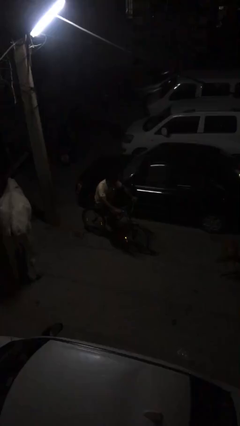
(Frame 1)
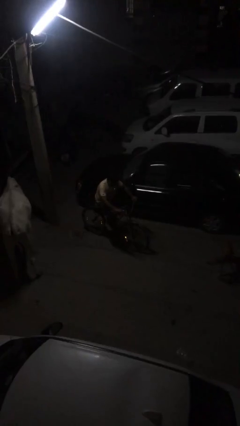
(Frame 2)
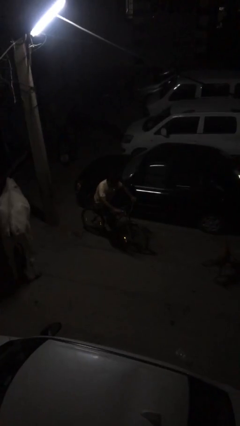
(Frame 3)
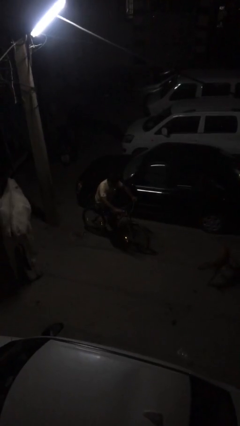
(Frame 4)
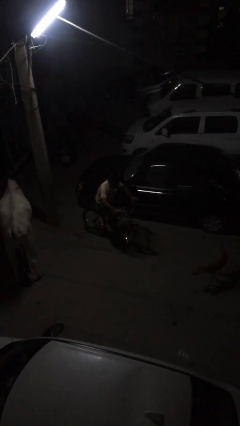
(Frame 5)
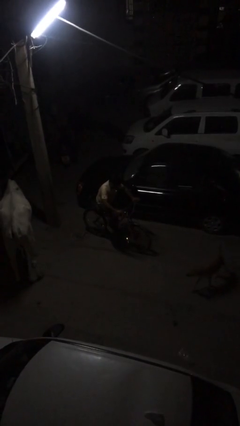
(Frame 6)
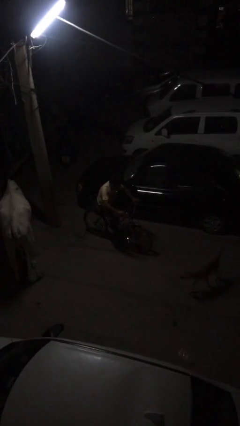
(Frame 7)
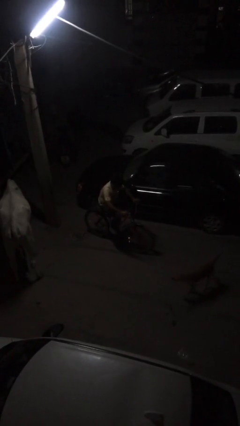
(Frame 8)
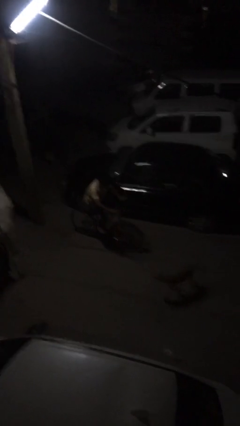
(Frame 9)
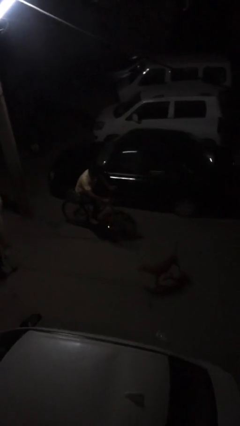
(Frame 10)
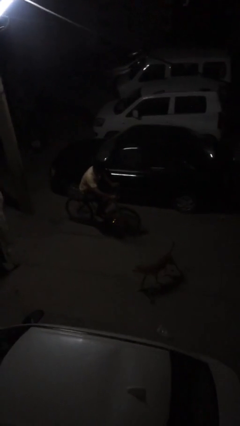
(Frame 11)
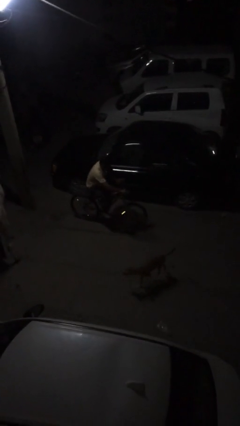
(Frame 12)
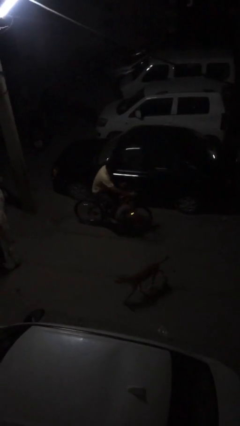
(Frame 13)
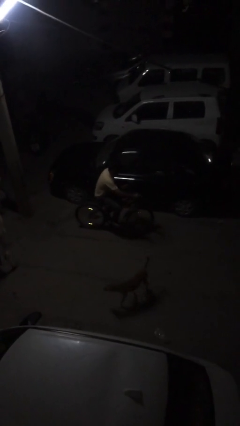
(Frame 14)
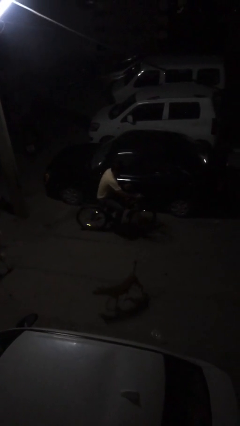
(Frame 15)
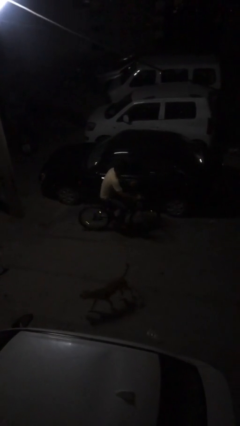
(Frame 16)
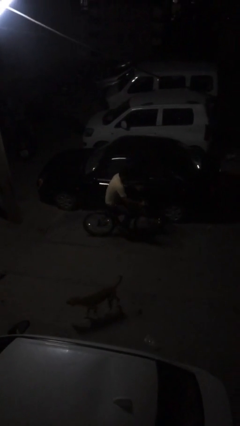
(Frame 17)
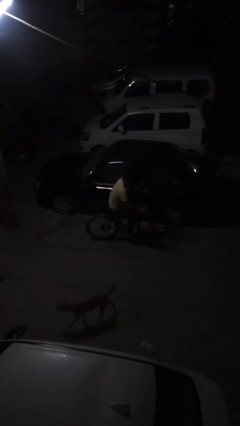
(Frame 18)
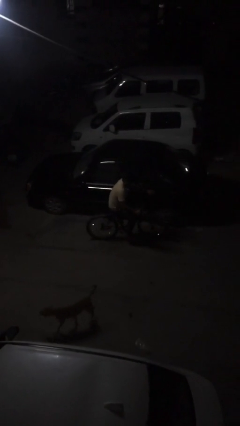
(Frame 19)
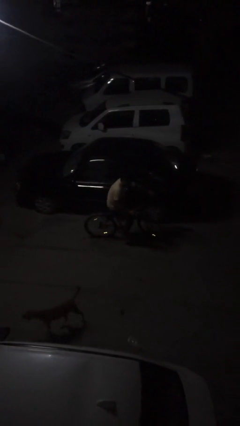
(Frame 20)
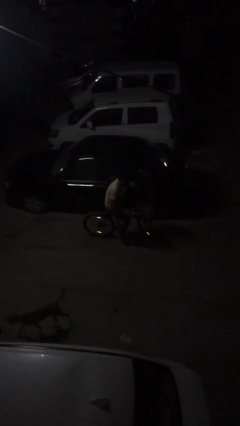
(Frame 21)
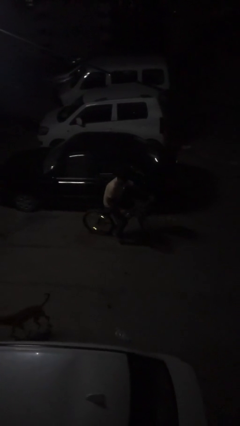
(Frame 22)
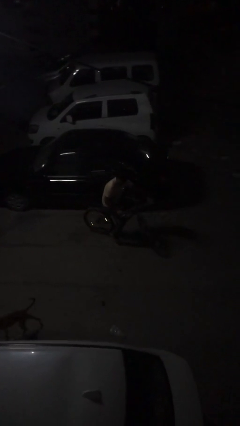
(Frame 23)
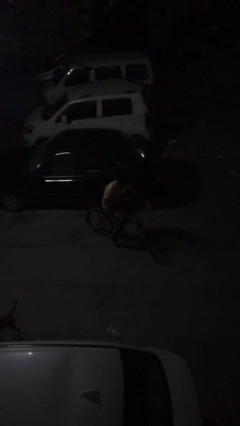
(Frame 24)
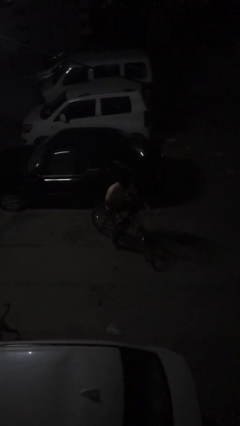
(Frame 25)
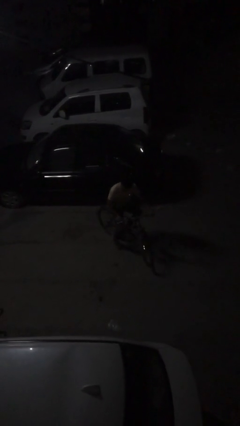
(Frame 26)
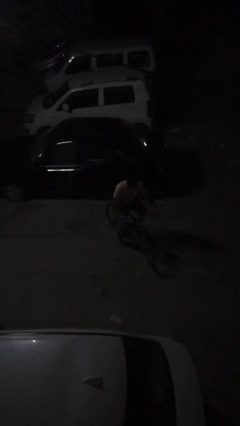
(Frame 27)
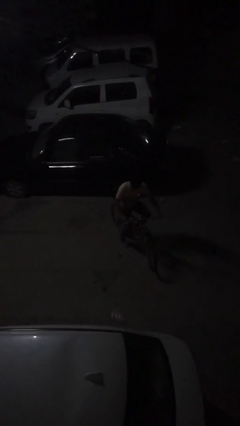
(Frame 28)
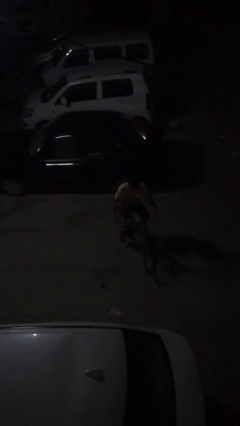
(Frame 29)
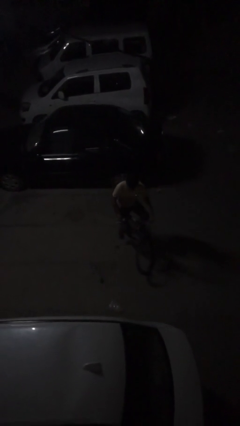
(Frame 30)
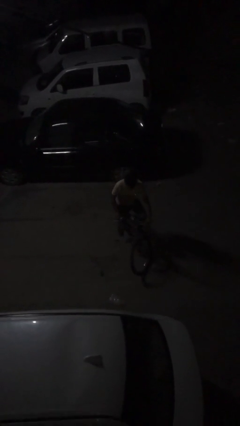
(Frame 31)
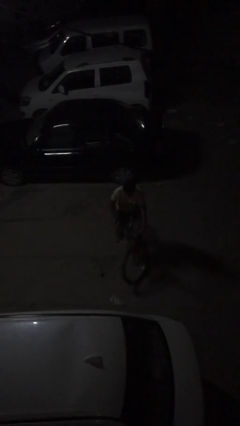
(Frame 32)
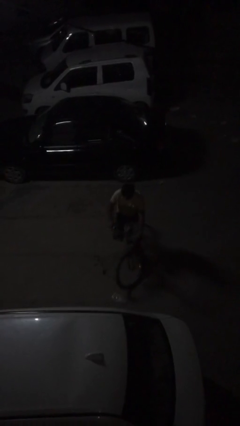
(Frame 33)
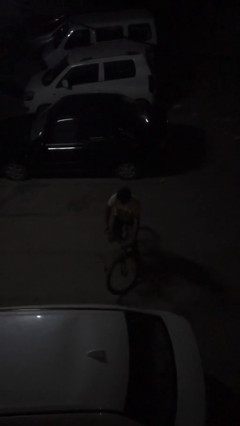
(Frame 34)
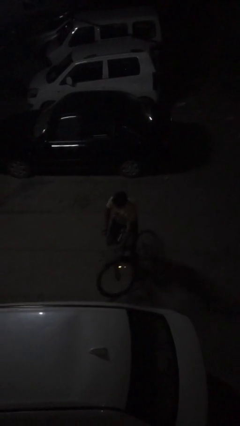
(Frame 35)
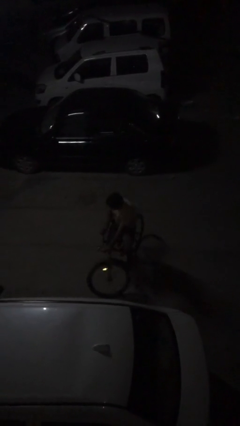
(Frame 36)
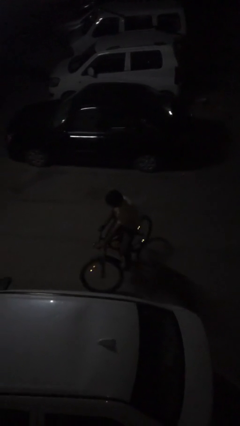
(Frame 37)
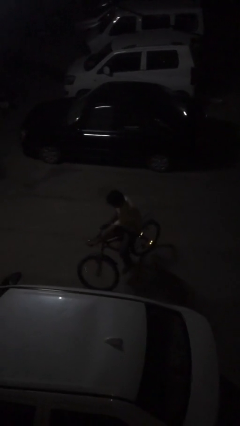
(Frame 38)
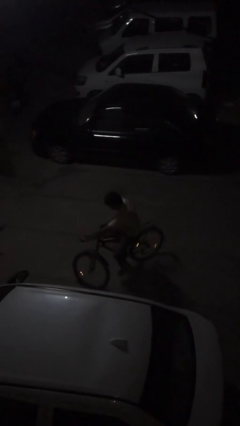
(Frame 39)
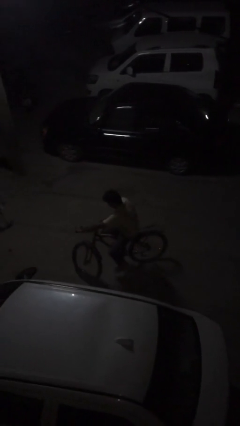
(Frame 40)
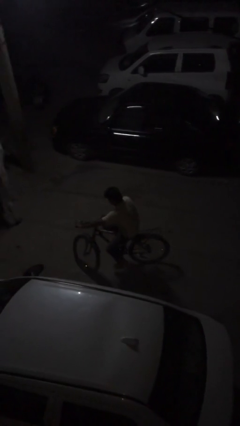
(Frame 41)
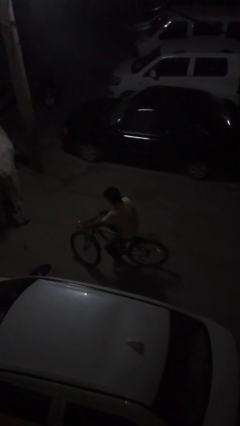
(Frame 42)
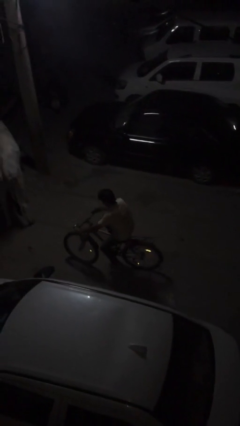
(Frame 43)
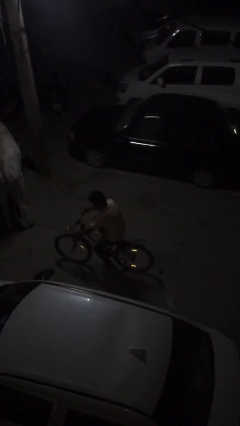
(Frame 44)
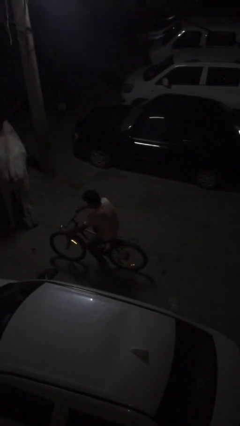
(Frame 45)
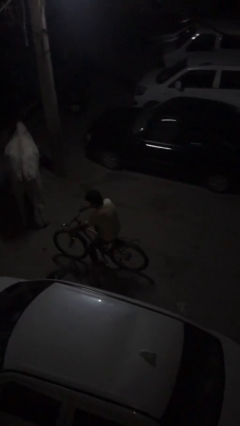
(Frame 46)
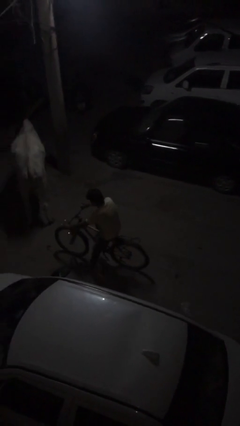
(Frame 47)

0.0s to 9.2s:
person rides bicycle

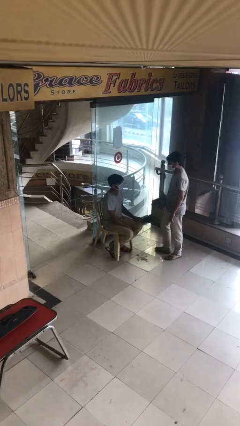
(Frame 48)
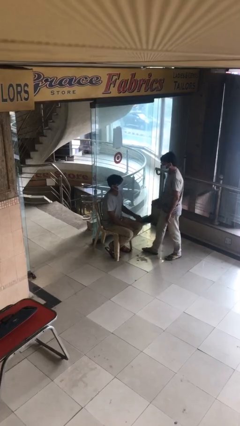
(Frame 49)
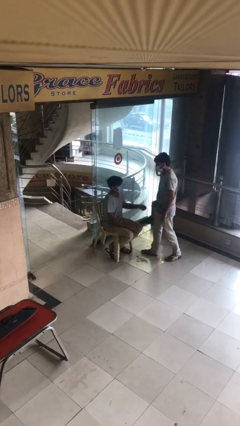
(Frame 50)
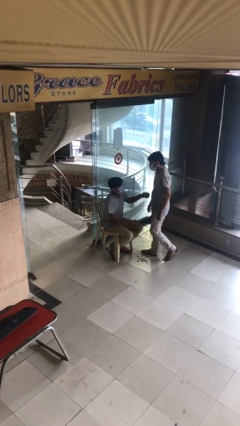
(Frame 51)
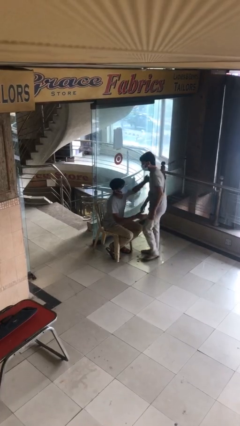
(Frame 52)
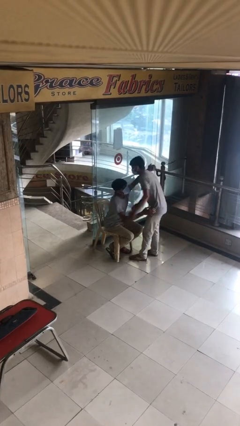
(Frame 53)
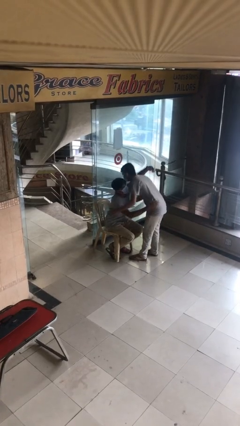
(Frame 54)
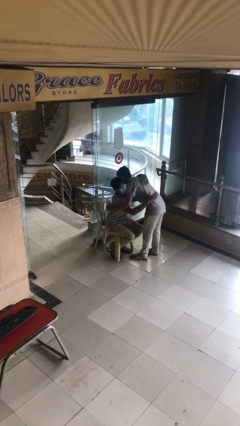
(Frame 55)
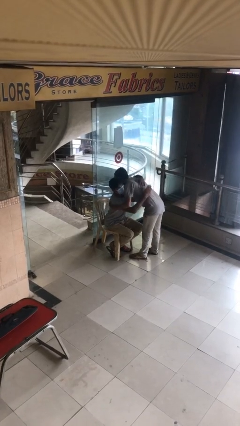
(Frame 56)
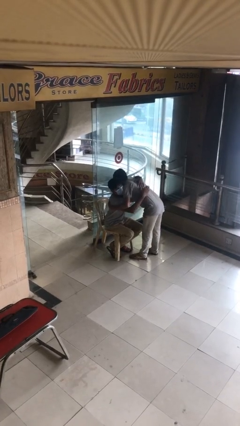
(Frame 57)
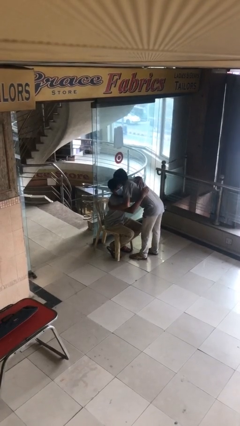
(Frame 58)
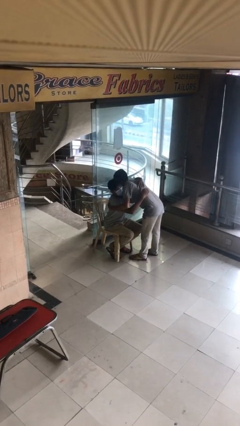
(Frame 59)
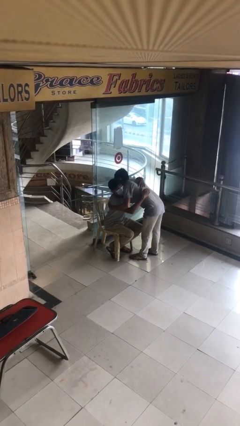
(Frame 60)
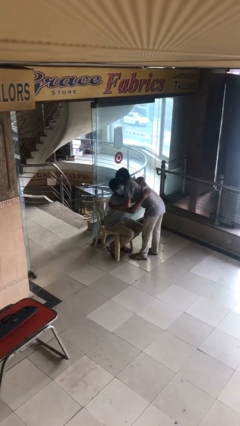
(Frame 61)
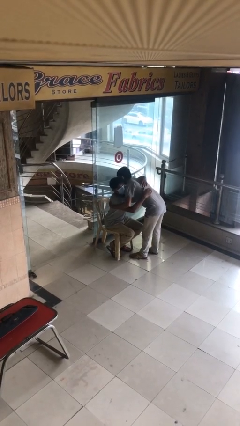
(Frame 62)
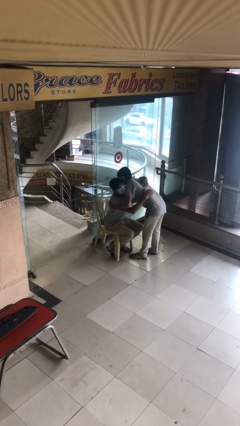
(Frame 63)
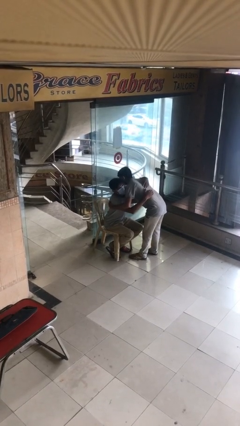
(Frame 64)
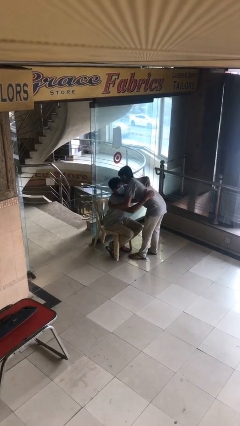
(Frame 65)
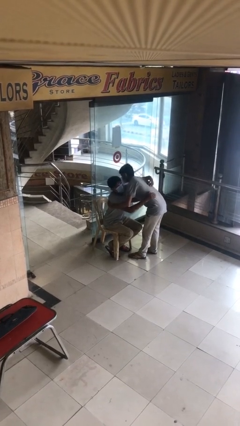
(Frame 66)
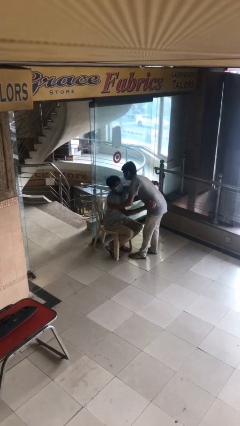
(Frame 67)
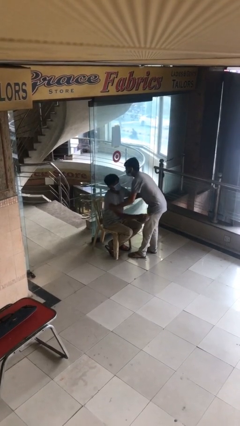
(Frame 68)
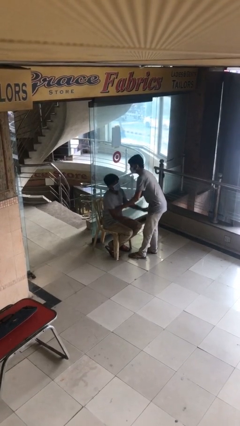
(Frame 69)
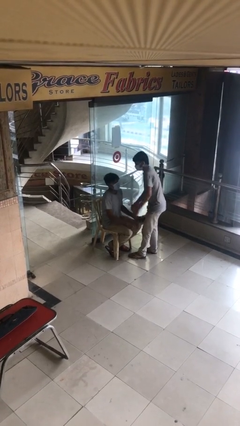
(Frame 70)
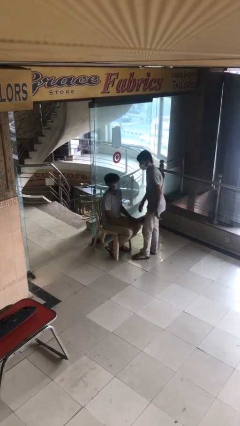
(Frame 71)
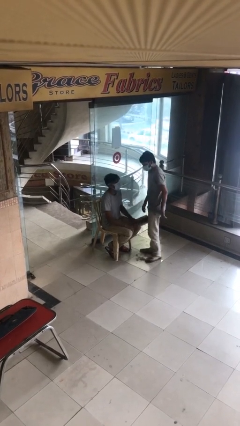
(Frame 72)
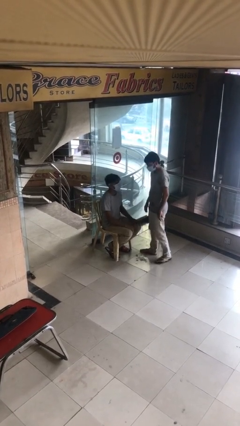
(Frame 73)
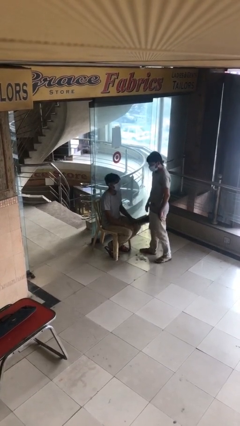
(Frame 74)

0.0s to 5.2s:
person embraces person

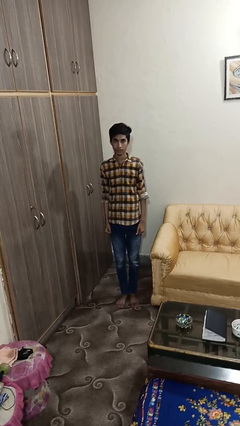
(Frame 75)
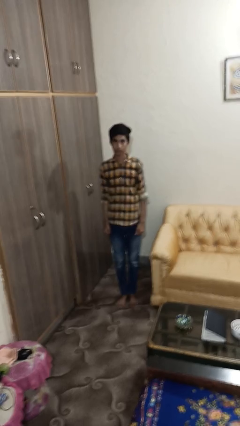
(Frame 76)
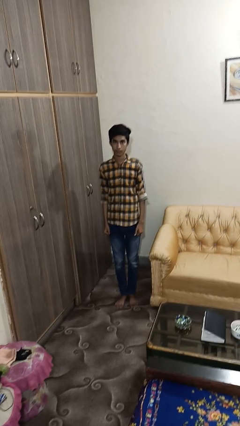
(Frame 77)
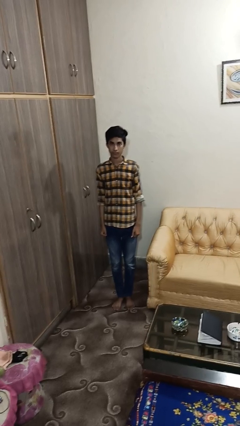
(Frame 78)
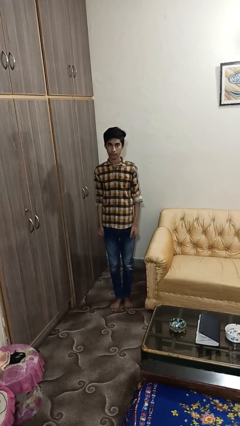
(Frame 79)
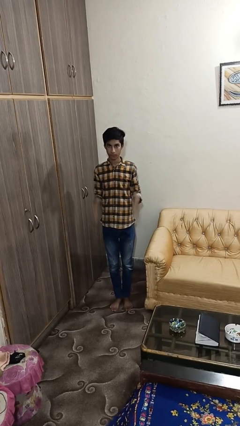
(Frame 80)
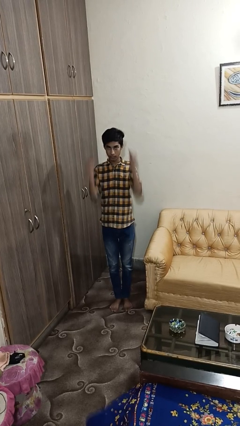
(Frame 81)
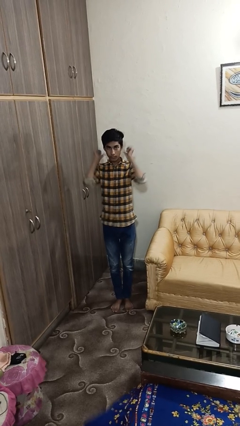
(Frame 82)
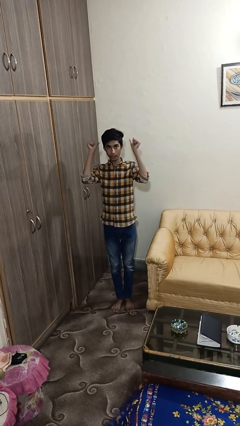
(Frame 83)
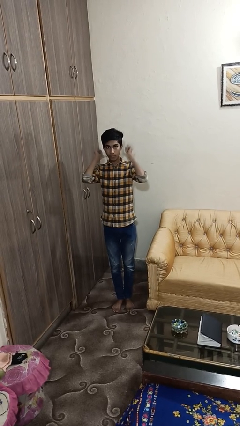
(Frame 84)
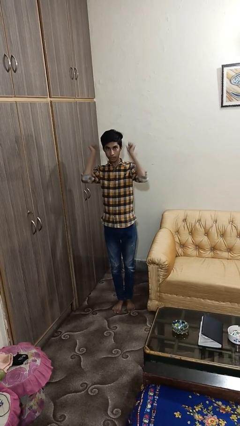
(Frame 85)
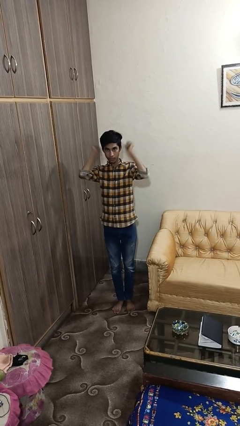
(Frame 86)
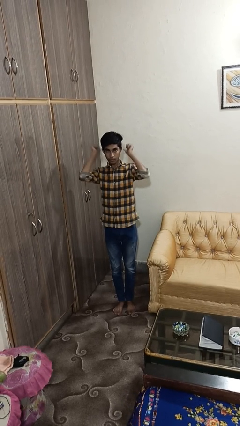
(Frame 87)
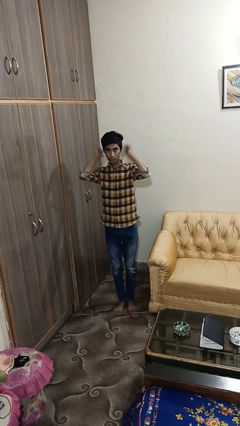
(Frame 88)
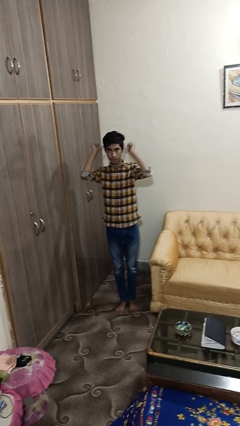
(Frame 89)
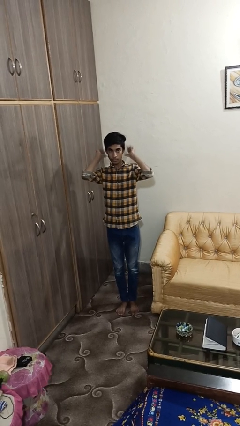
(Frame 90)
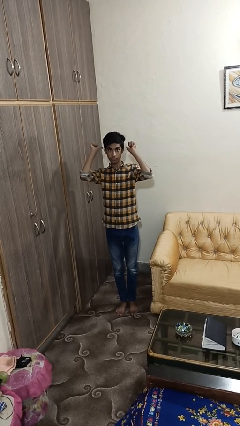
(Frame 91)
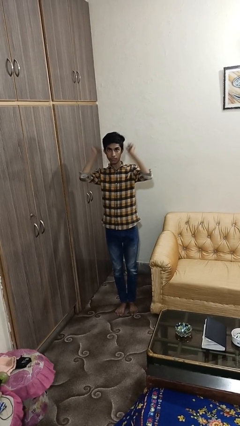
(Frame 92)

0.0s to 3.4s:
person gestures behind me

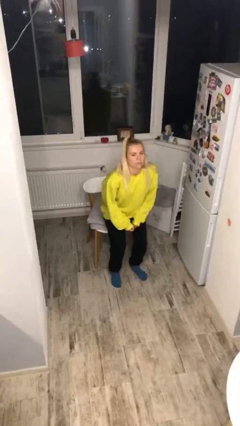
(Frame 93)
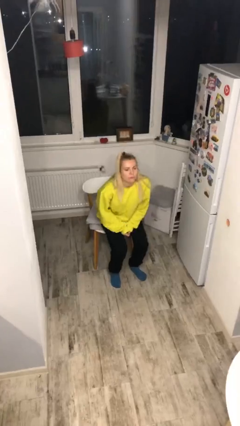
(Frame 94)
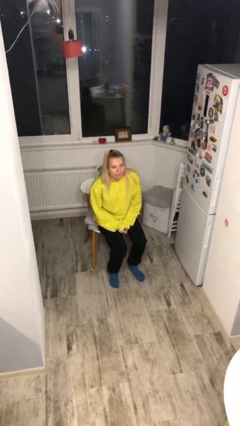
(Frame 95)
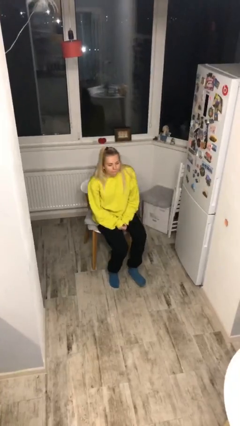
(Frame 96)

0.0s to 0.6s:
person sits down
